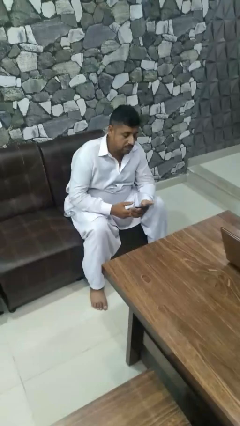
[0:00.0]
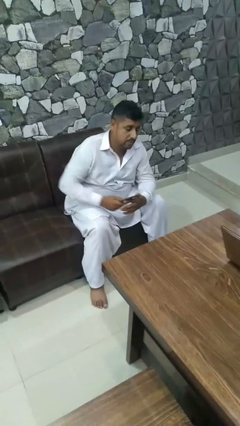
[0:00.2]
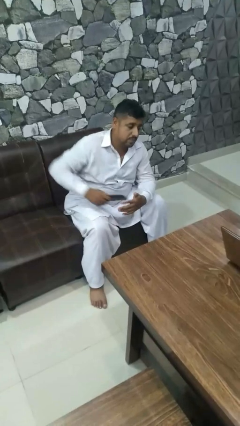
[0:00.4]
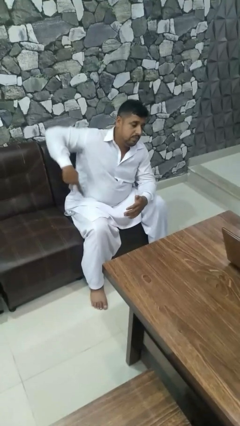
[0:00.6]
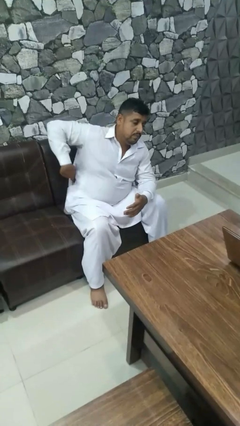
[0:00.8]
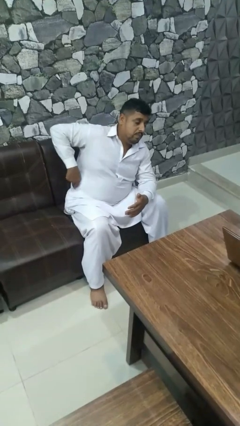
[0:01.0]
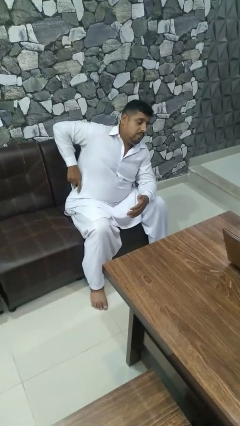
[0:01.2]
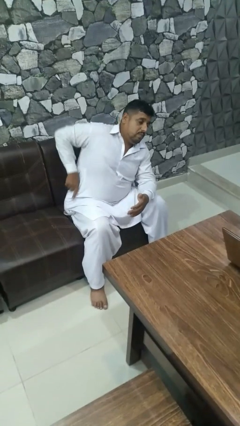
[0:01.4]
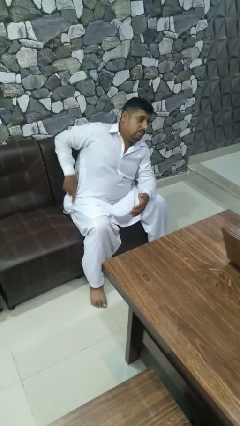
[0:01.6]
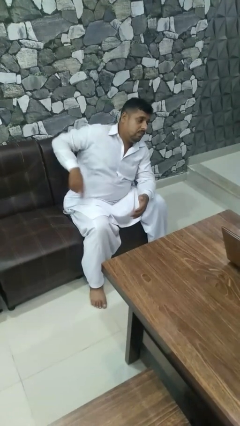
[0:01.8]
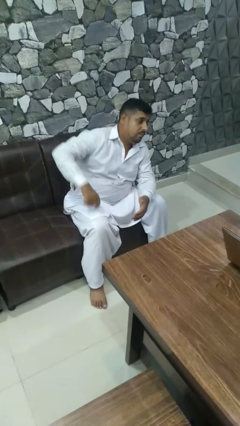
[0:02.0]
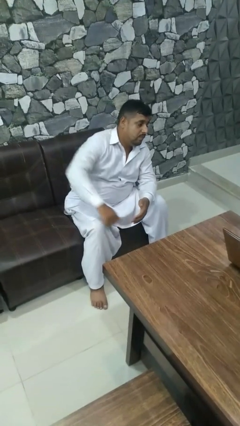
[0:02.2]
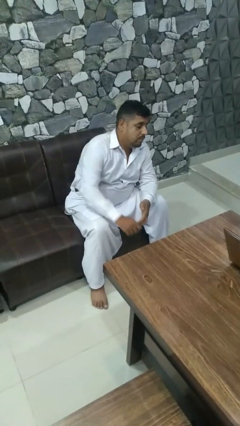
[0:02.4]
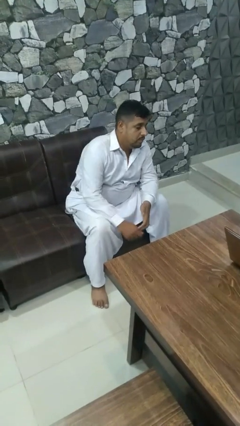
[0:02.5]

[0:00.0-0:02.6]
person puts phone into pocket

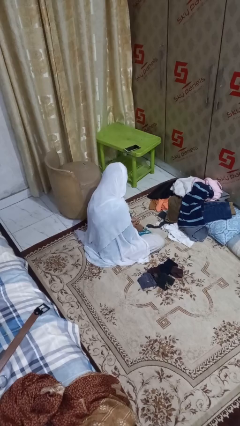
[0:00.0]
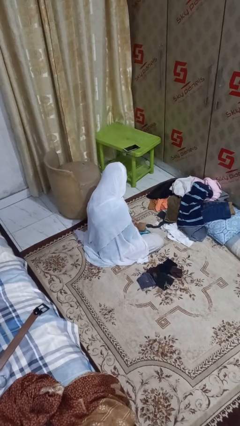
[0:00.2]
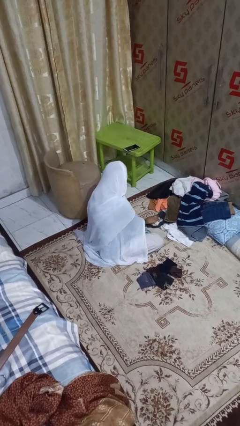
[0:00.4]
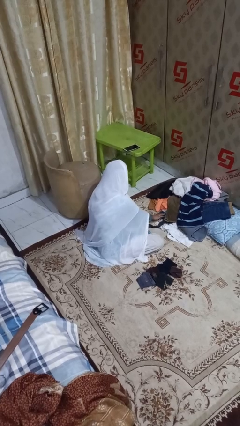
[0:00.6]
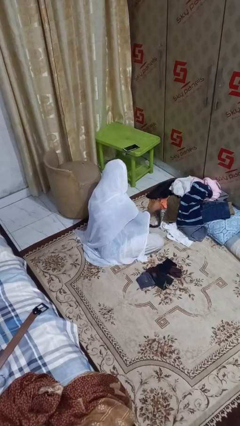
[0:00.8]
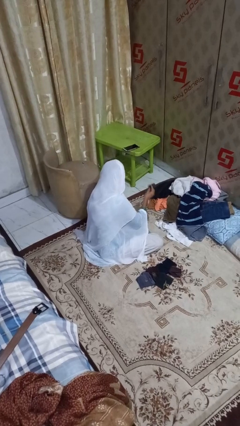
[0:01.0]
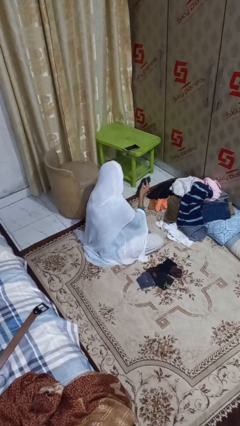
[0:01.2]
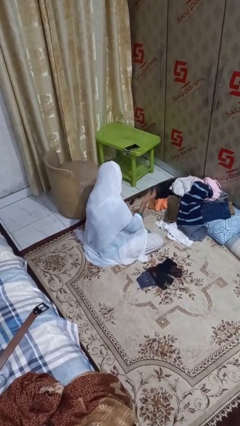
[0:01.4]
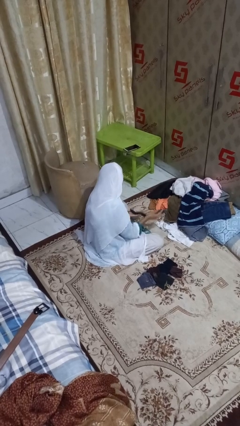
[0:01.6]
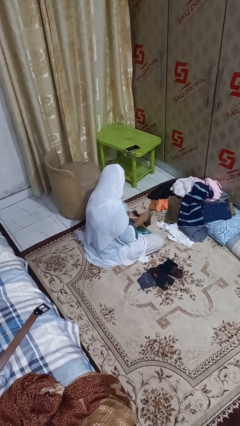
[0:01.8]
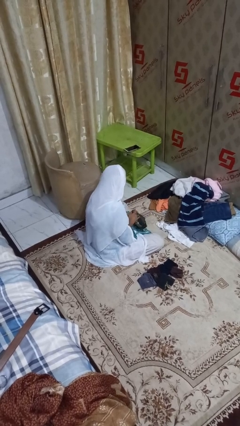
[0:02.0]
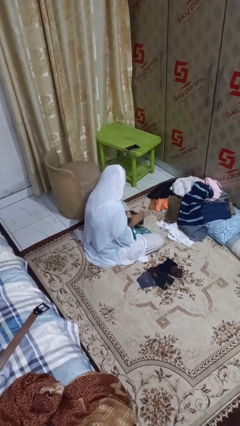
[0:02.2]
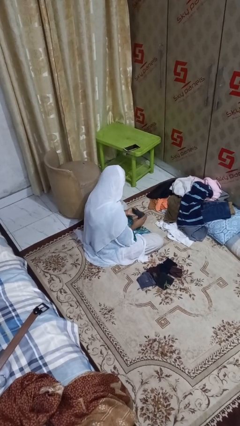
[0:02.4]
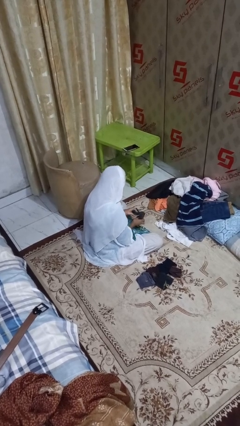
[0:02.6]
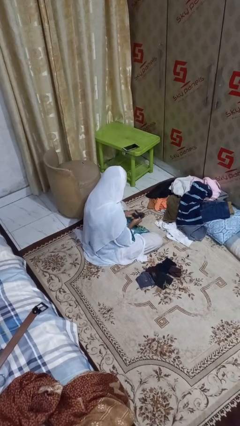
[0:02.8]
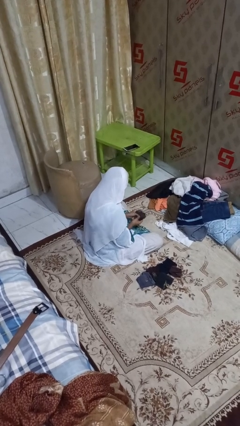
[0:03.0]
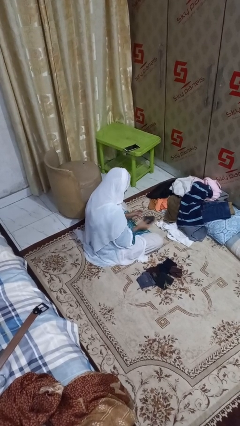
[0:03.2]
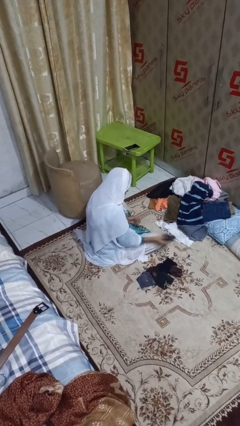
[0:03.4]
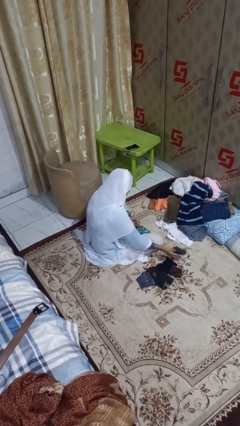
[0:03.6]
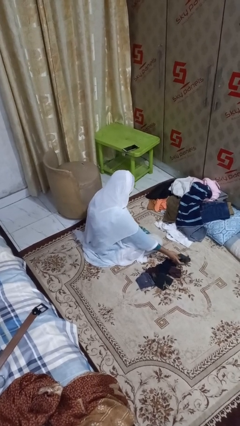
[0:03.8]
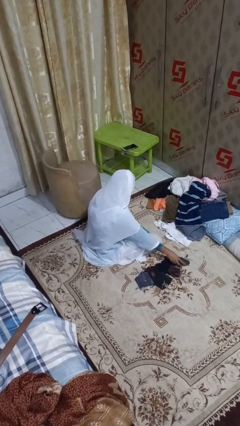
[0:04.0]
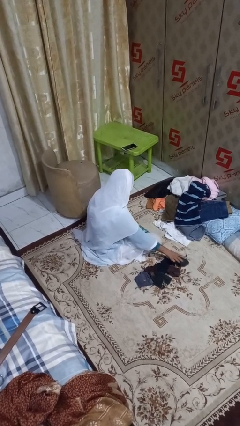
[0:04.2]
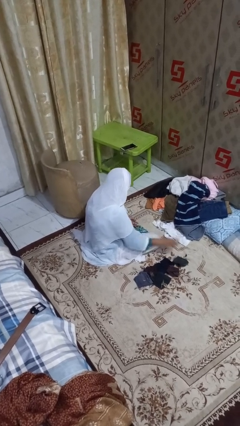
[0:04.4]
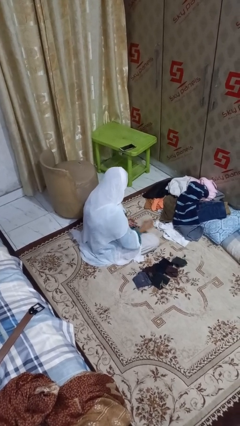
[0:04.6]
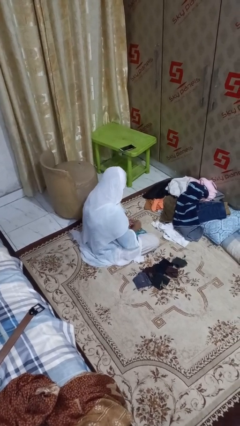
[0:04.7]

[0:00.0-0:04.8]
person folds socks

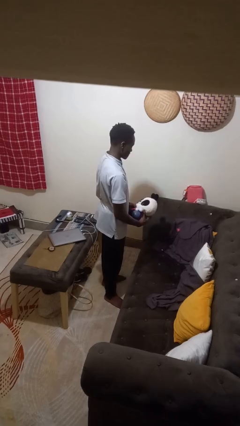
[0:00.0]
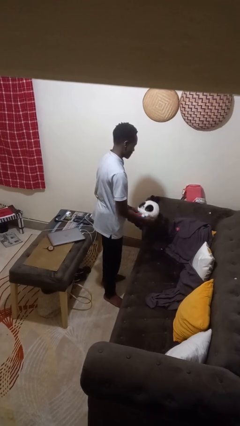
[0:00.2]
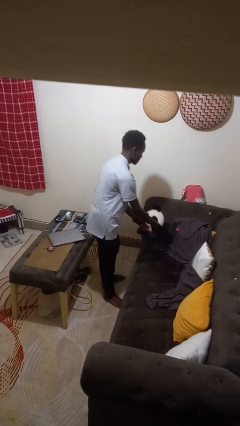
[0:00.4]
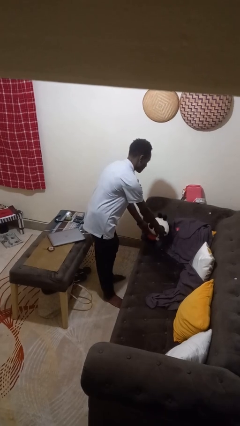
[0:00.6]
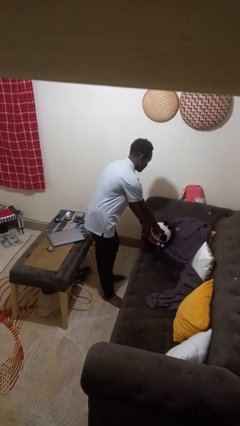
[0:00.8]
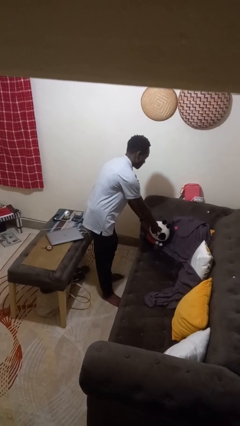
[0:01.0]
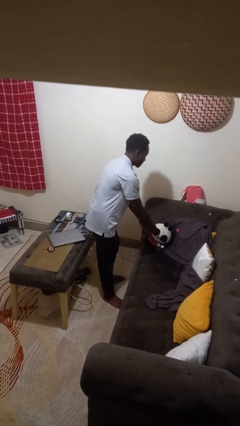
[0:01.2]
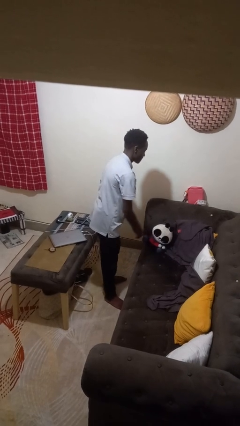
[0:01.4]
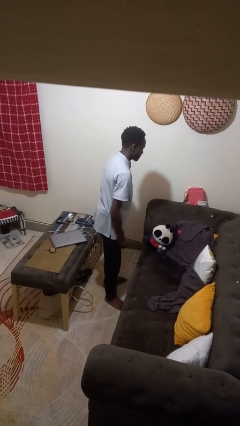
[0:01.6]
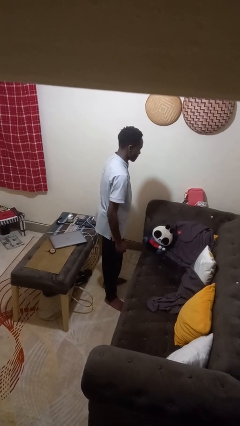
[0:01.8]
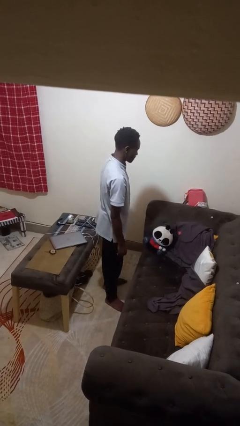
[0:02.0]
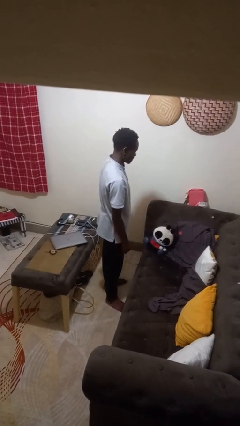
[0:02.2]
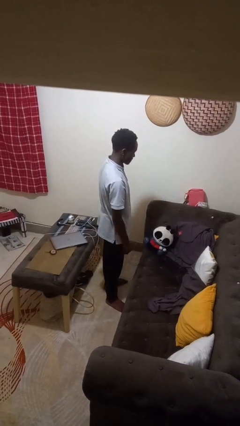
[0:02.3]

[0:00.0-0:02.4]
person puts down object on couch

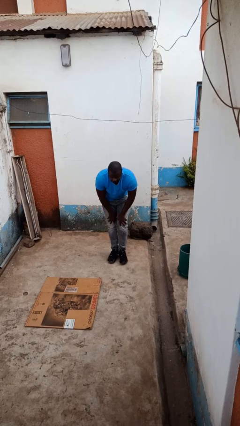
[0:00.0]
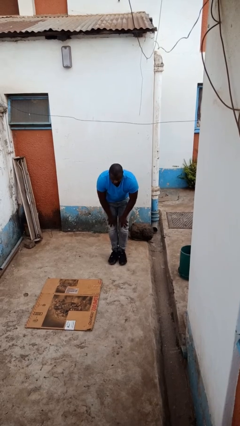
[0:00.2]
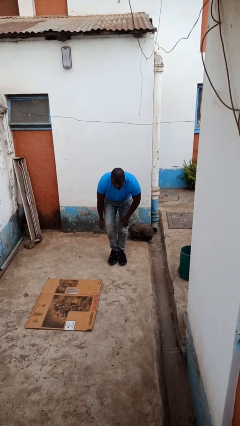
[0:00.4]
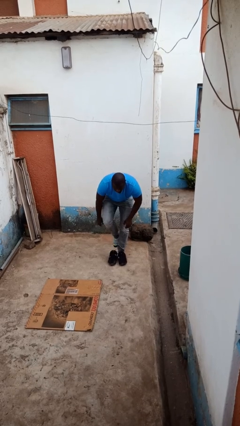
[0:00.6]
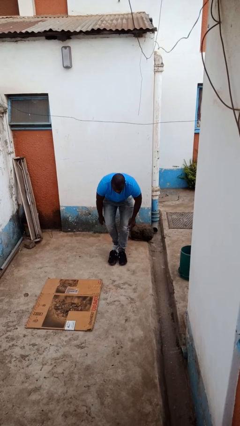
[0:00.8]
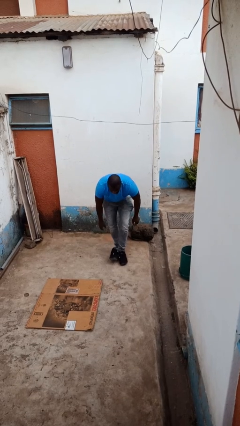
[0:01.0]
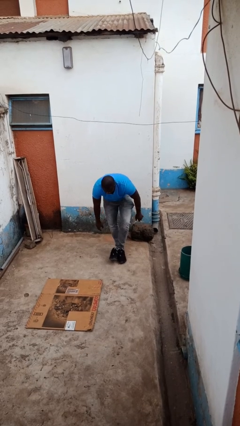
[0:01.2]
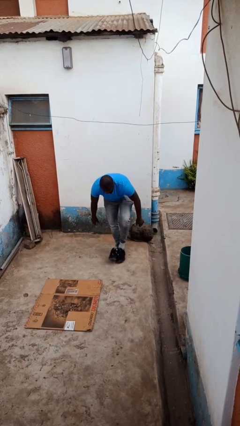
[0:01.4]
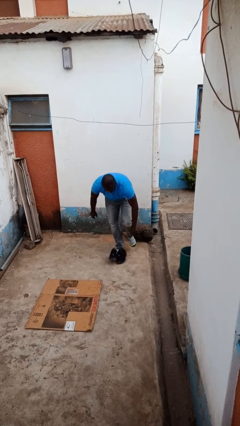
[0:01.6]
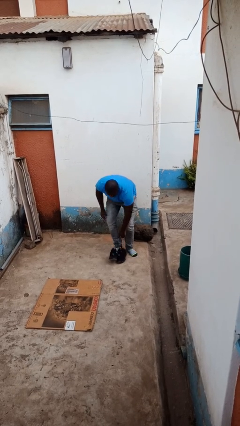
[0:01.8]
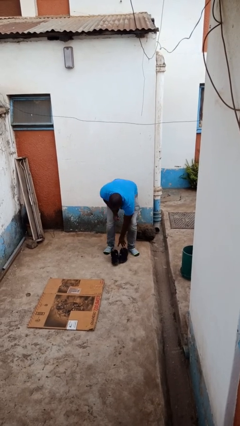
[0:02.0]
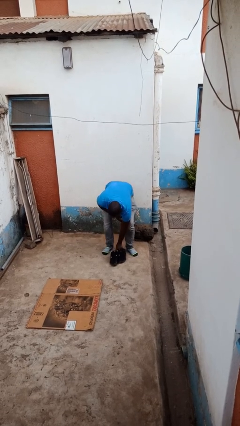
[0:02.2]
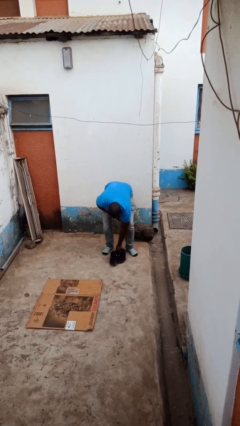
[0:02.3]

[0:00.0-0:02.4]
person takes off shoes

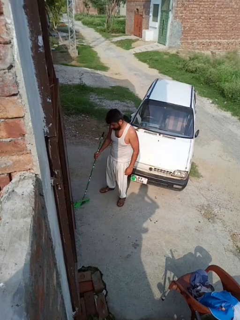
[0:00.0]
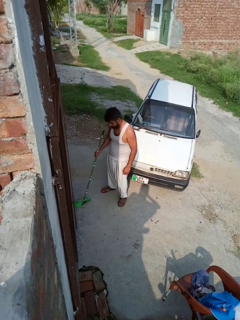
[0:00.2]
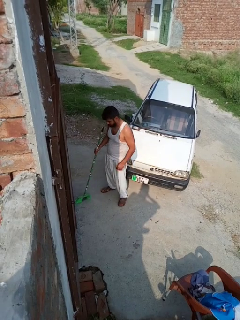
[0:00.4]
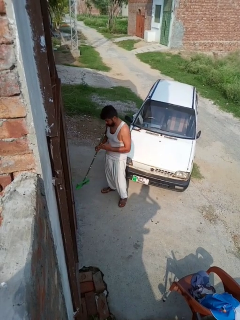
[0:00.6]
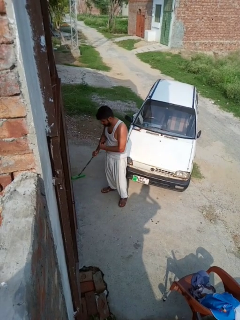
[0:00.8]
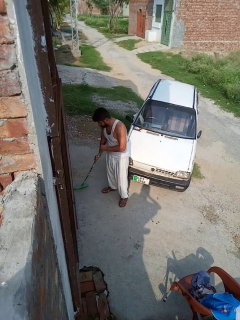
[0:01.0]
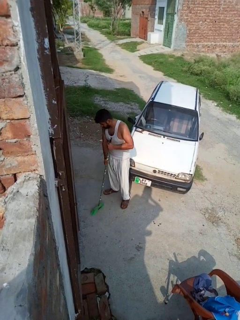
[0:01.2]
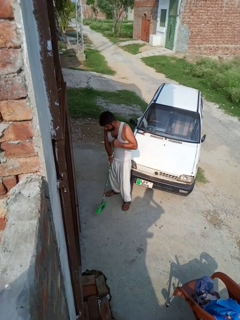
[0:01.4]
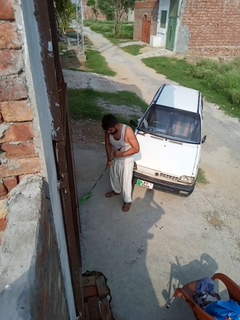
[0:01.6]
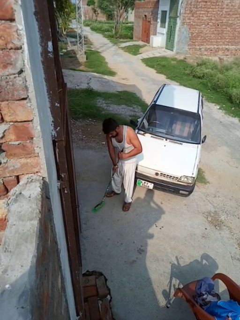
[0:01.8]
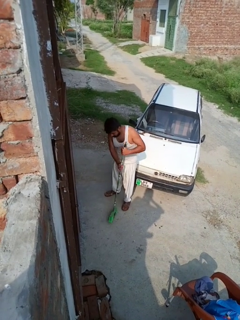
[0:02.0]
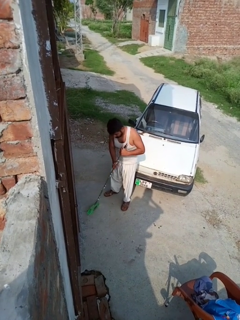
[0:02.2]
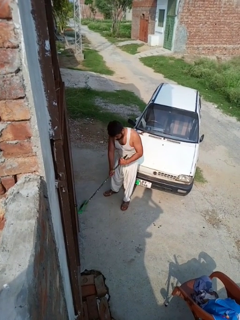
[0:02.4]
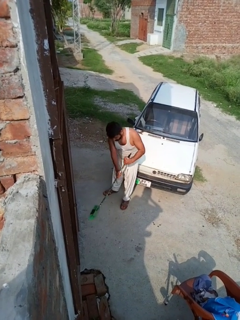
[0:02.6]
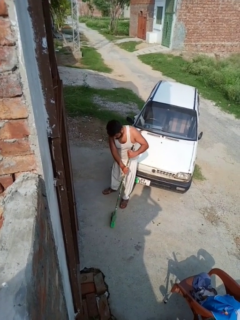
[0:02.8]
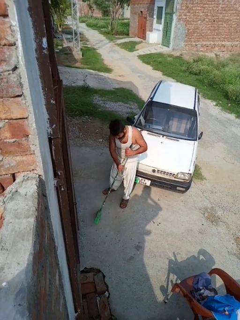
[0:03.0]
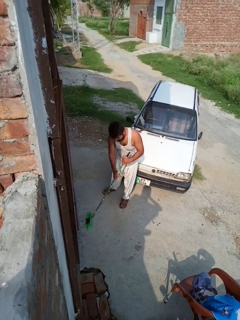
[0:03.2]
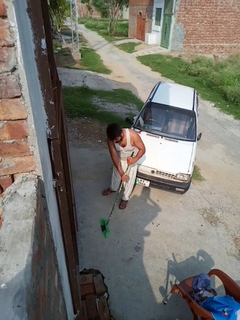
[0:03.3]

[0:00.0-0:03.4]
person sweeps floor

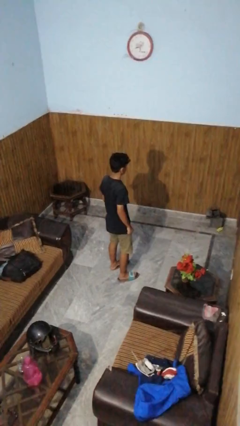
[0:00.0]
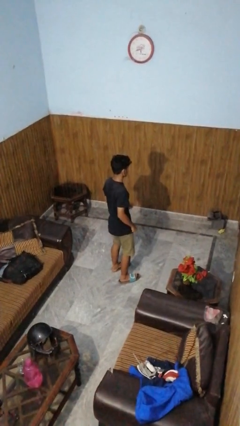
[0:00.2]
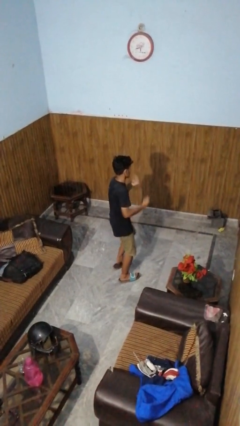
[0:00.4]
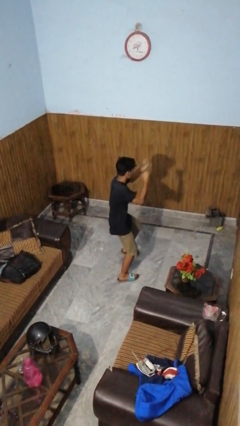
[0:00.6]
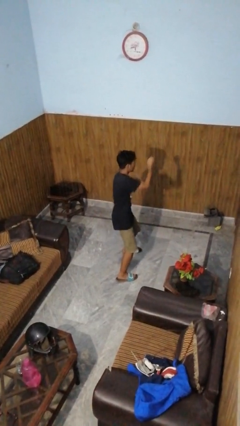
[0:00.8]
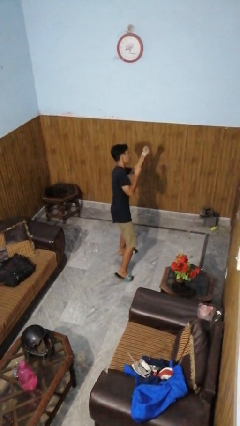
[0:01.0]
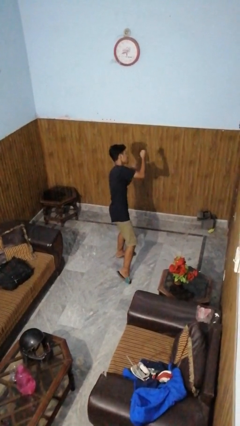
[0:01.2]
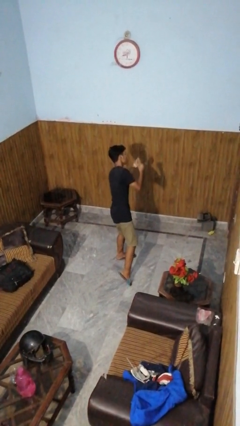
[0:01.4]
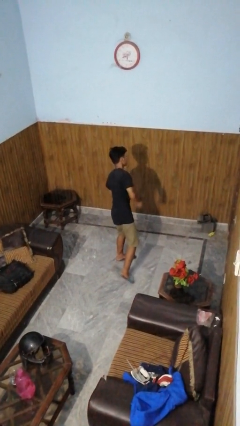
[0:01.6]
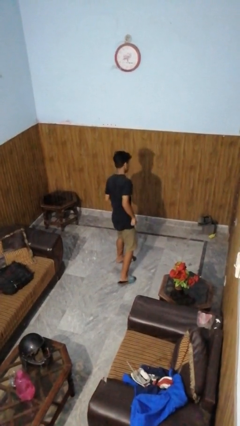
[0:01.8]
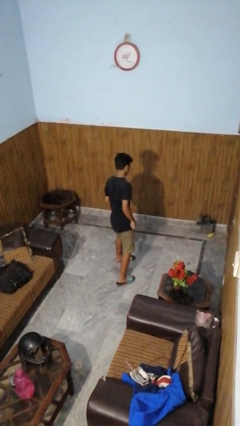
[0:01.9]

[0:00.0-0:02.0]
person punches

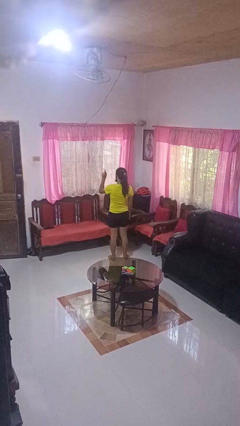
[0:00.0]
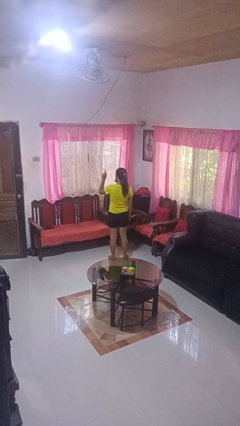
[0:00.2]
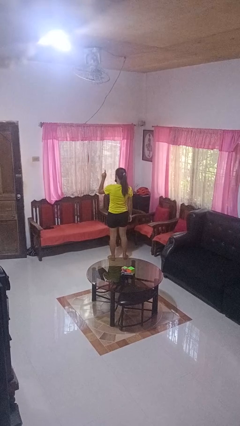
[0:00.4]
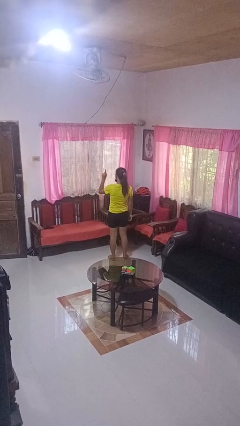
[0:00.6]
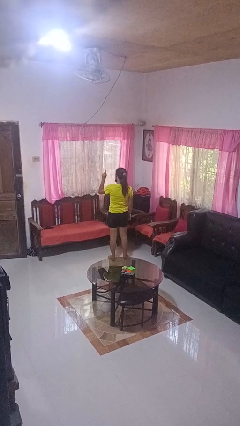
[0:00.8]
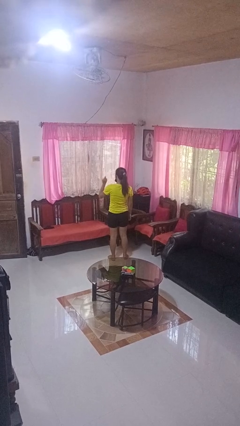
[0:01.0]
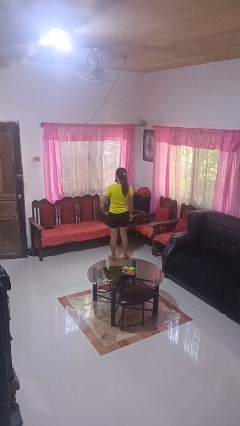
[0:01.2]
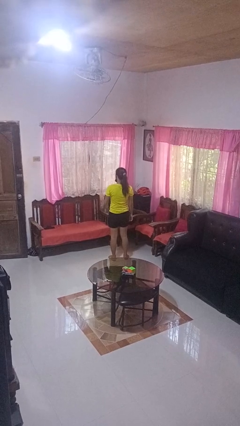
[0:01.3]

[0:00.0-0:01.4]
person gestures number one
